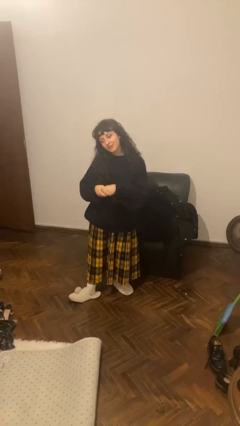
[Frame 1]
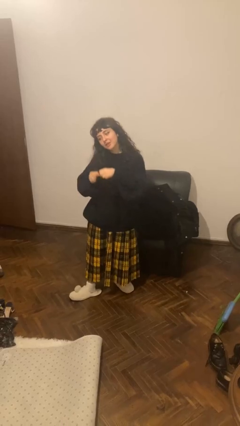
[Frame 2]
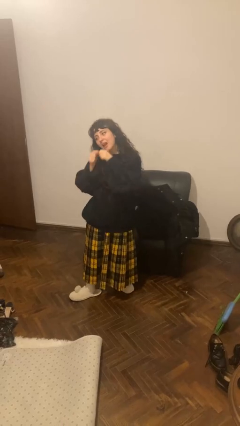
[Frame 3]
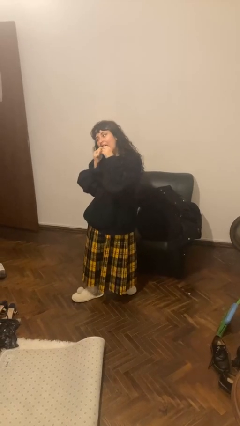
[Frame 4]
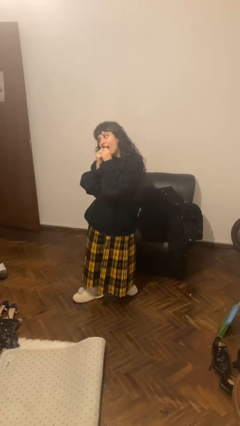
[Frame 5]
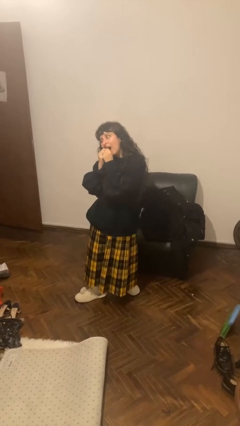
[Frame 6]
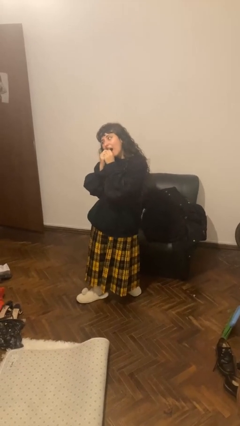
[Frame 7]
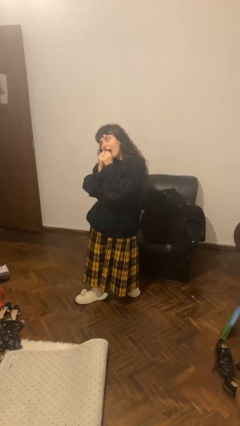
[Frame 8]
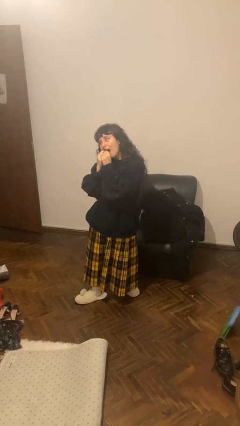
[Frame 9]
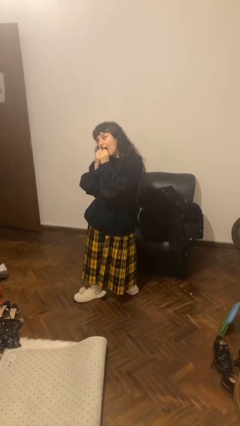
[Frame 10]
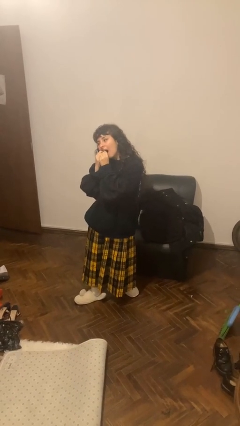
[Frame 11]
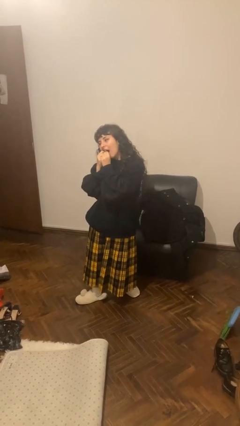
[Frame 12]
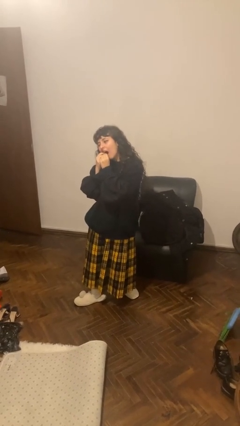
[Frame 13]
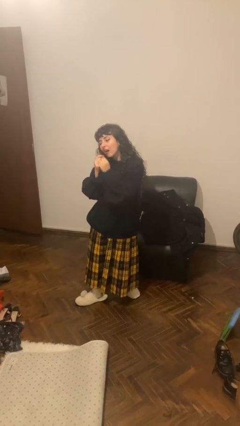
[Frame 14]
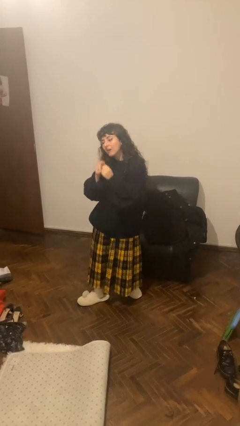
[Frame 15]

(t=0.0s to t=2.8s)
person flosses

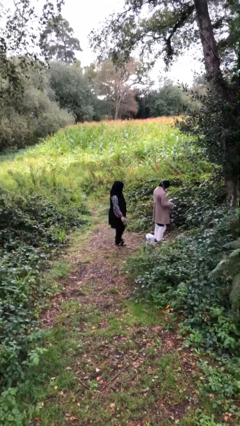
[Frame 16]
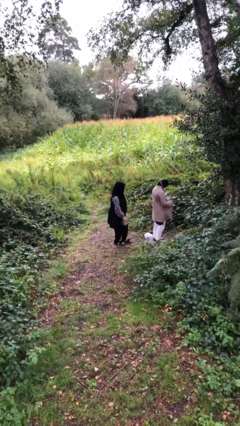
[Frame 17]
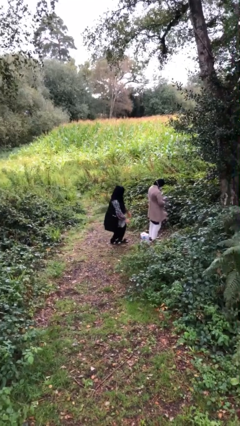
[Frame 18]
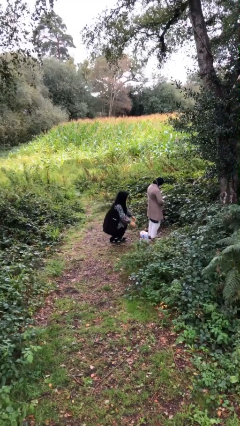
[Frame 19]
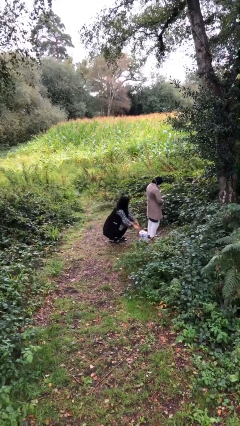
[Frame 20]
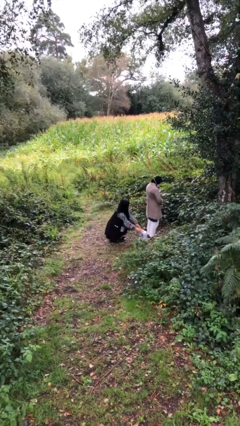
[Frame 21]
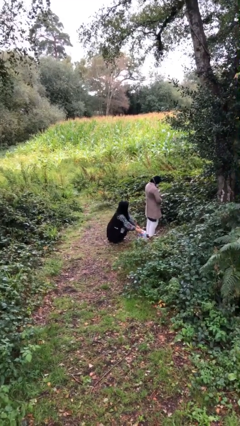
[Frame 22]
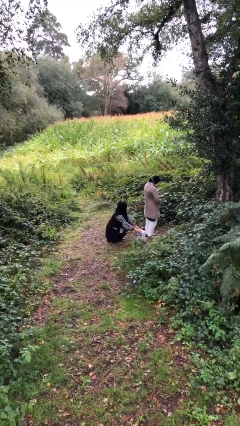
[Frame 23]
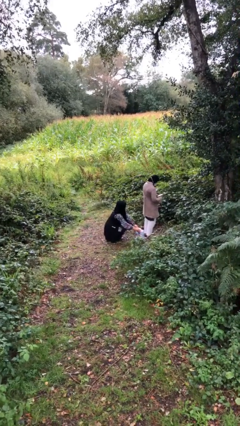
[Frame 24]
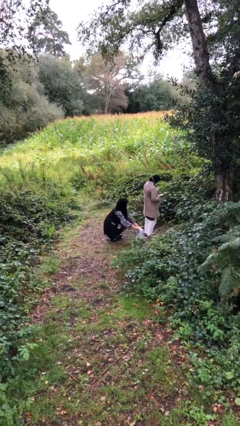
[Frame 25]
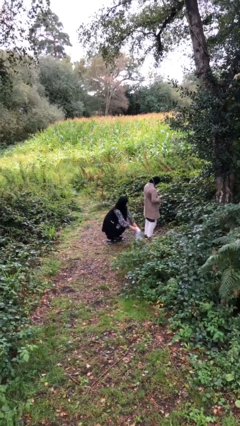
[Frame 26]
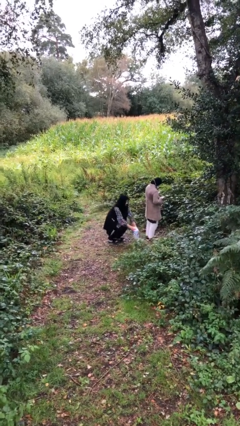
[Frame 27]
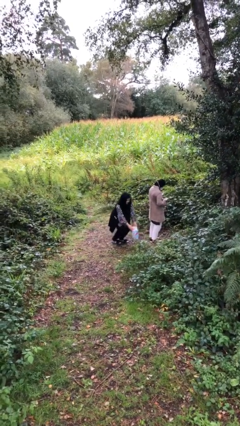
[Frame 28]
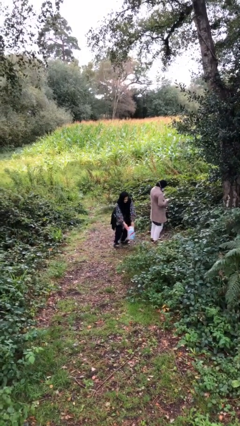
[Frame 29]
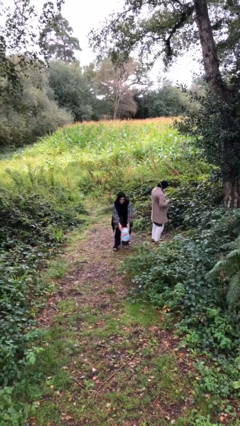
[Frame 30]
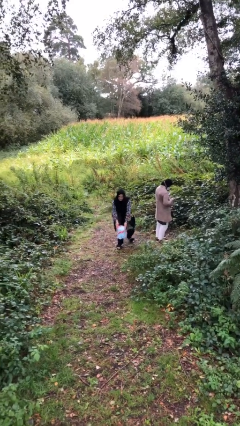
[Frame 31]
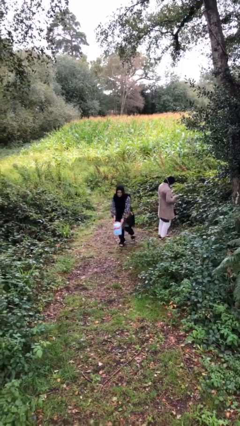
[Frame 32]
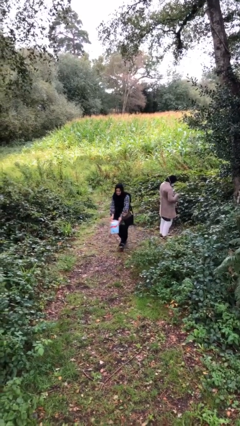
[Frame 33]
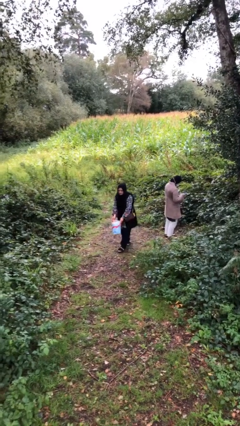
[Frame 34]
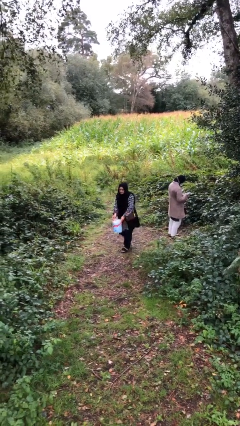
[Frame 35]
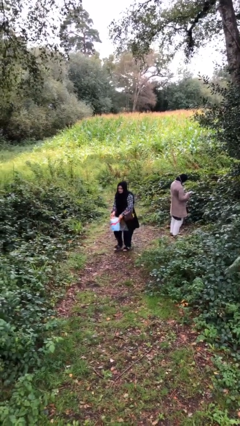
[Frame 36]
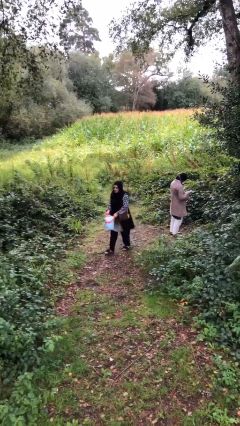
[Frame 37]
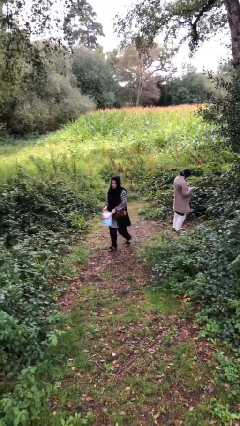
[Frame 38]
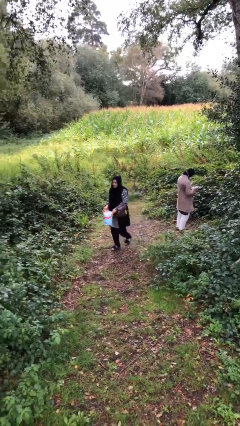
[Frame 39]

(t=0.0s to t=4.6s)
person steals object from person

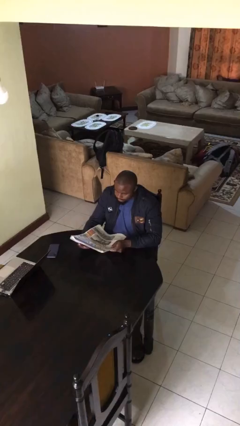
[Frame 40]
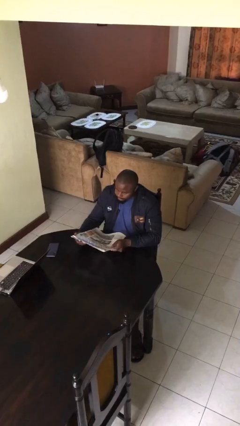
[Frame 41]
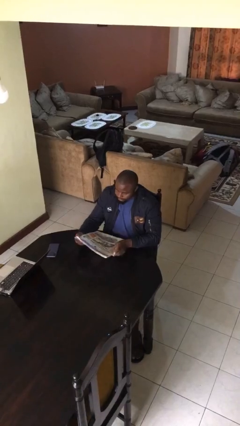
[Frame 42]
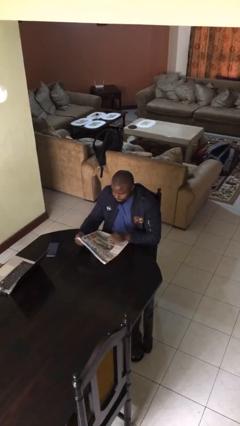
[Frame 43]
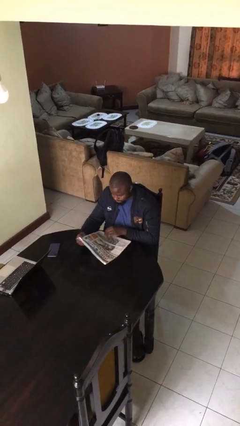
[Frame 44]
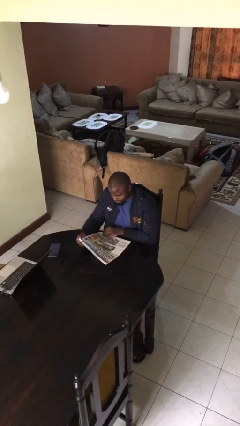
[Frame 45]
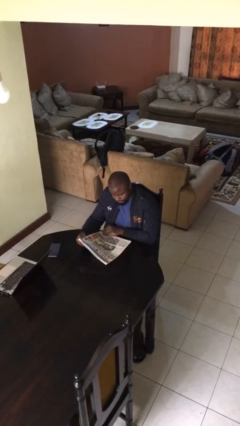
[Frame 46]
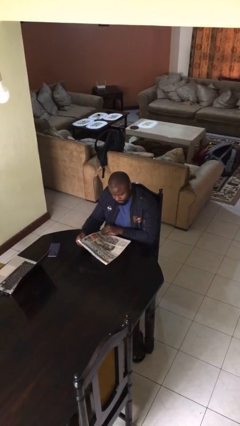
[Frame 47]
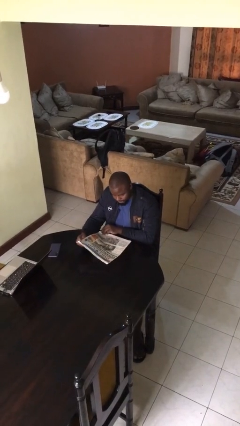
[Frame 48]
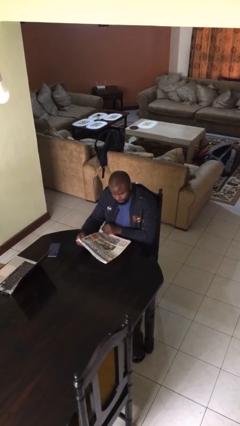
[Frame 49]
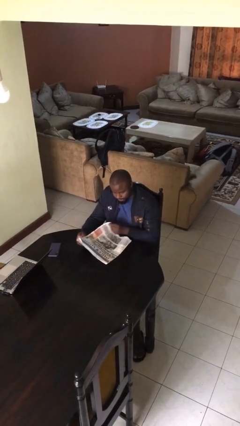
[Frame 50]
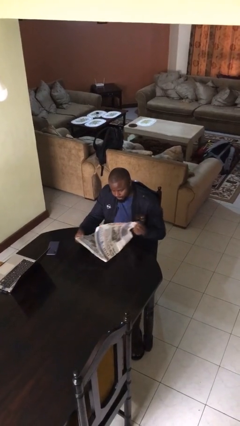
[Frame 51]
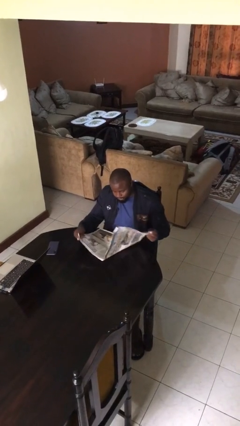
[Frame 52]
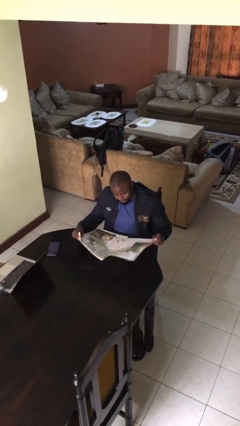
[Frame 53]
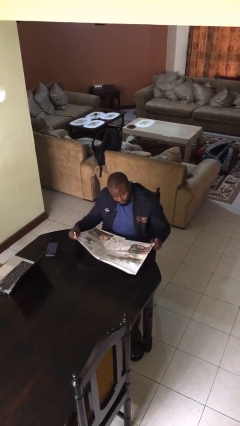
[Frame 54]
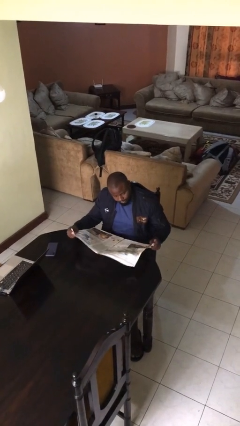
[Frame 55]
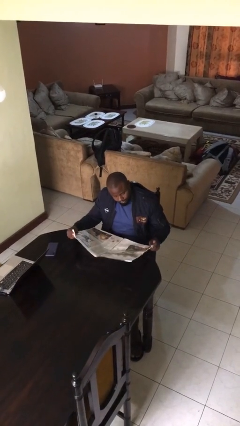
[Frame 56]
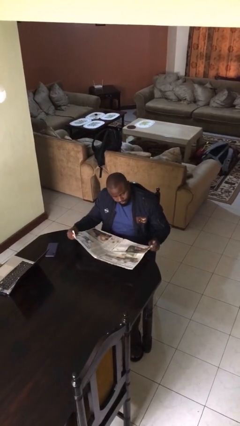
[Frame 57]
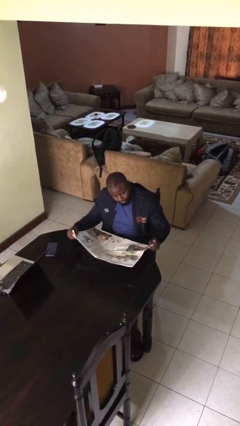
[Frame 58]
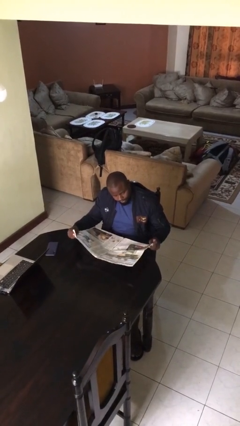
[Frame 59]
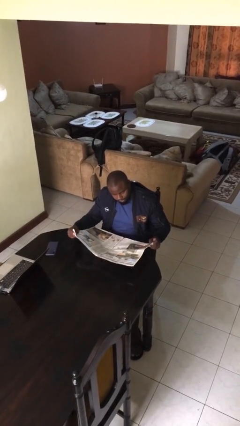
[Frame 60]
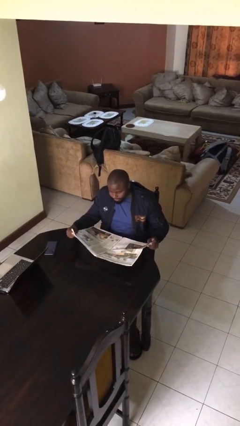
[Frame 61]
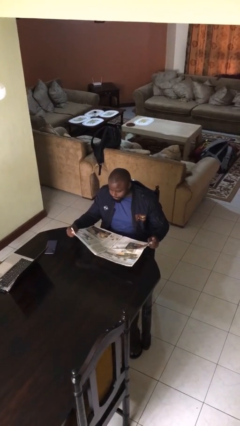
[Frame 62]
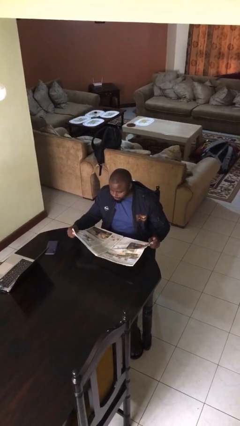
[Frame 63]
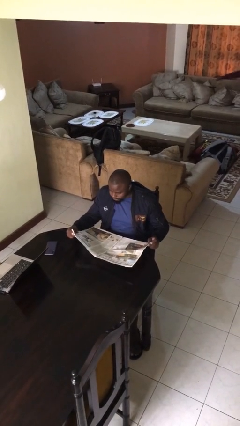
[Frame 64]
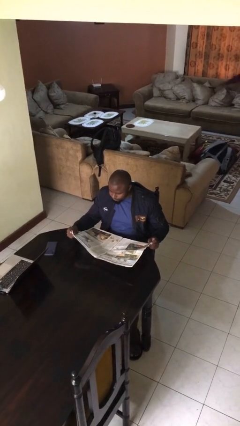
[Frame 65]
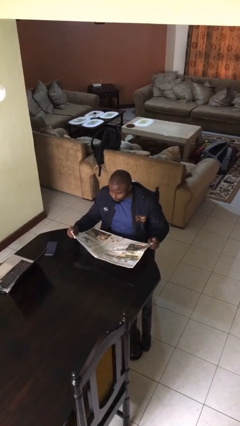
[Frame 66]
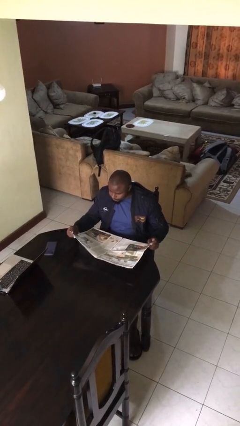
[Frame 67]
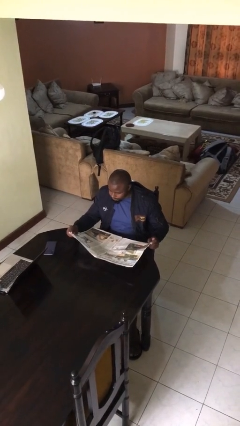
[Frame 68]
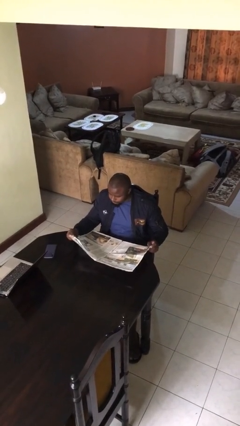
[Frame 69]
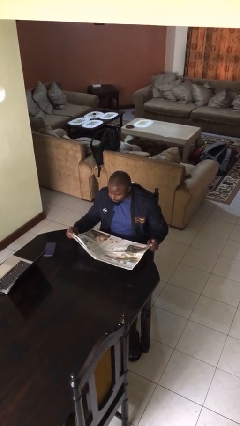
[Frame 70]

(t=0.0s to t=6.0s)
person reads document

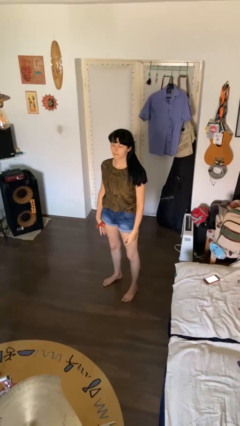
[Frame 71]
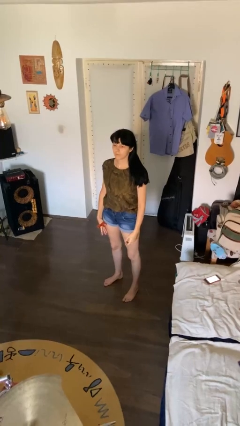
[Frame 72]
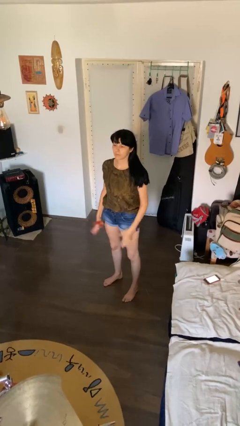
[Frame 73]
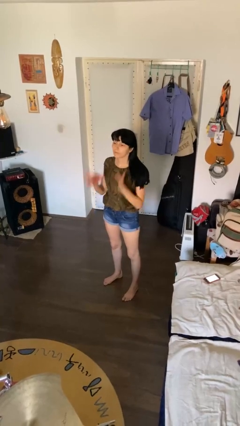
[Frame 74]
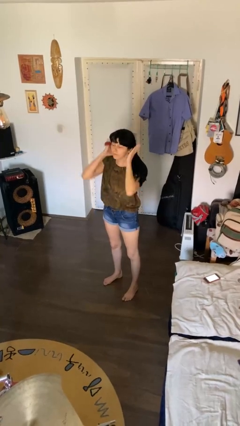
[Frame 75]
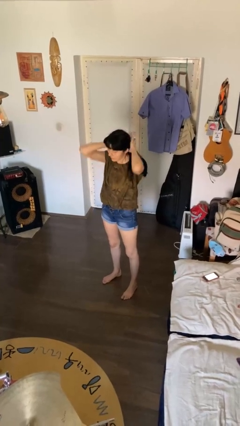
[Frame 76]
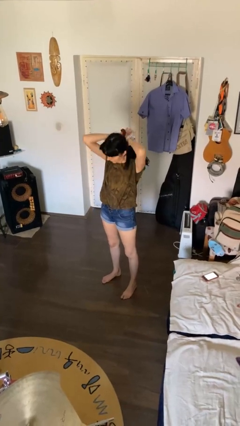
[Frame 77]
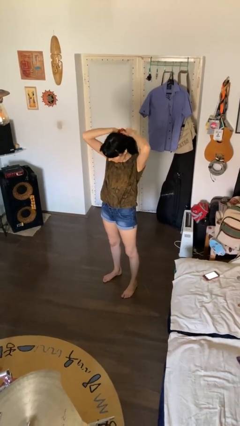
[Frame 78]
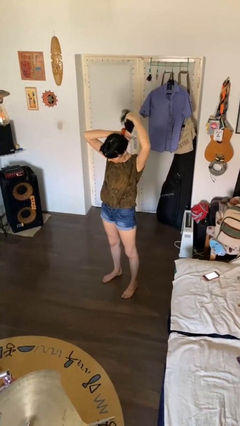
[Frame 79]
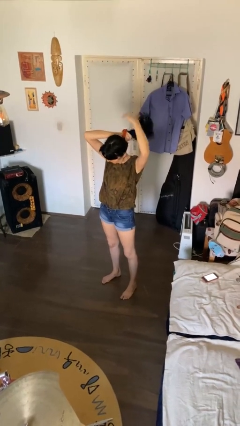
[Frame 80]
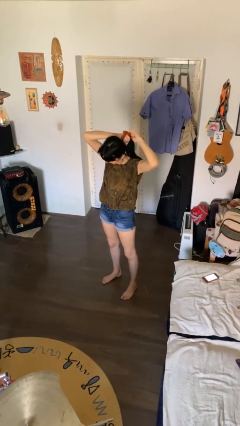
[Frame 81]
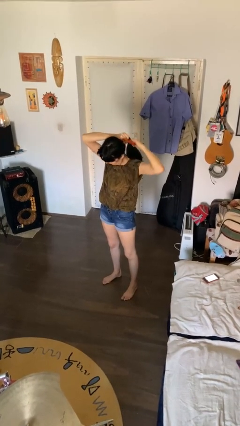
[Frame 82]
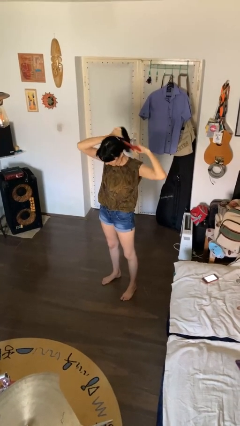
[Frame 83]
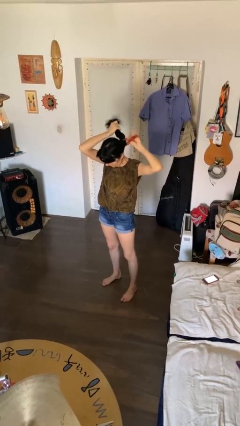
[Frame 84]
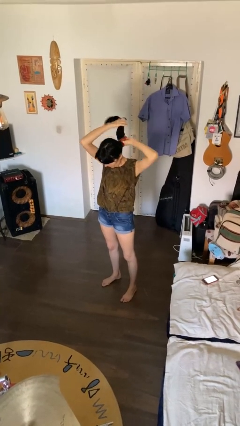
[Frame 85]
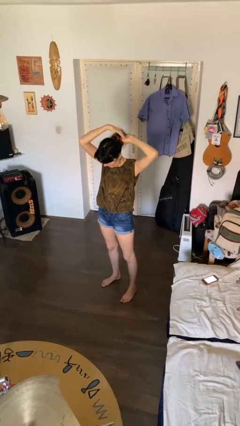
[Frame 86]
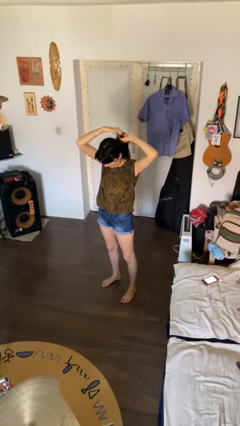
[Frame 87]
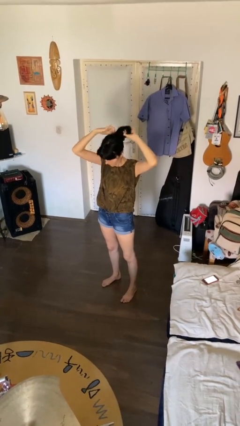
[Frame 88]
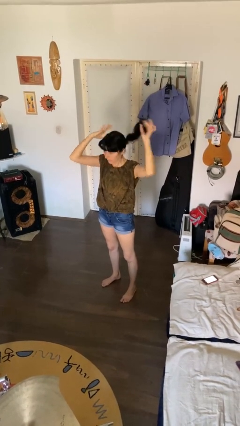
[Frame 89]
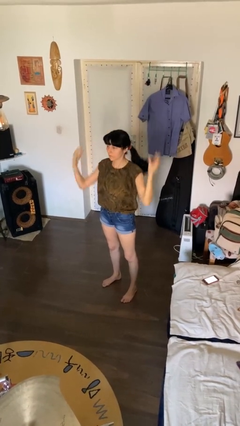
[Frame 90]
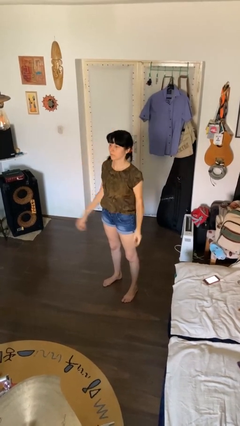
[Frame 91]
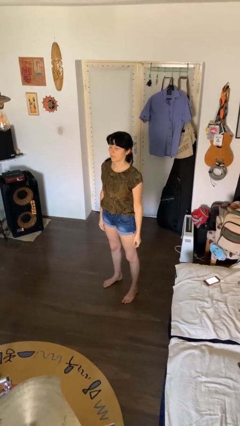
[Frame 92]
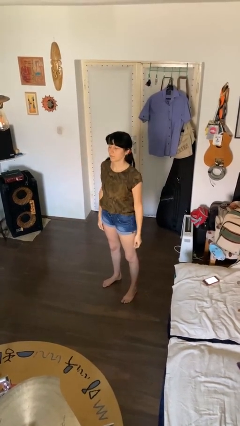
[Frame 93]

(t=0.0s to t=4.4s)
person puts hair in ponytail

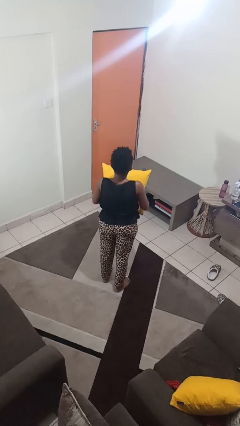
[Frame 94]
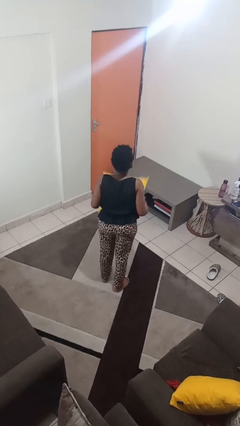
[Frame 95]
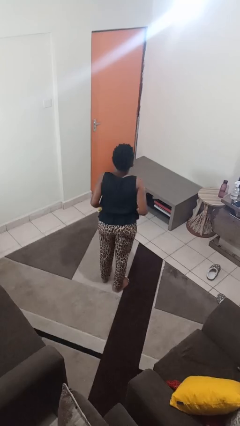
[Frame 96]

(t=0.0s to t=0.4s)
person throws object on table
